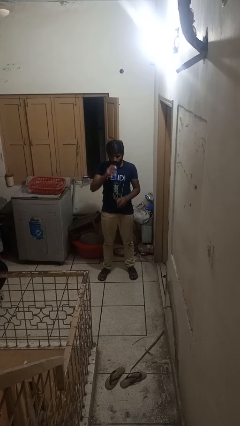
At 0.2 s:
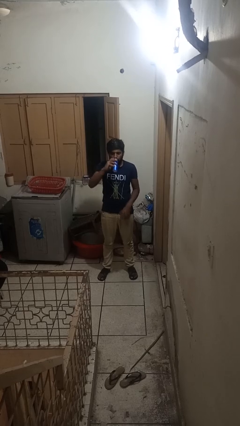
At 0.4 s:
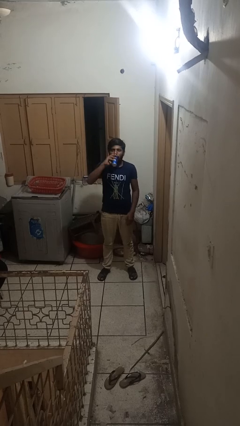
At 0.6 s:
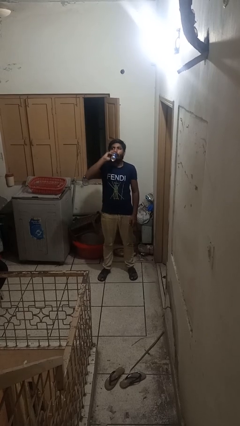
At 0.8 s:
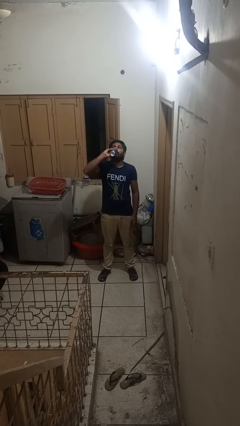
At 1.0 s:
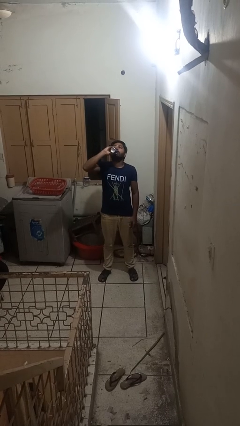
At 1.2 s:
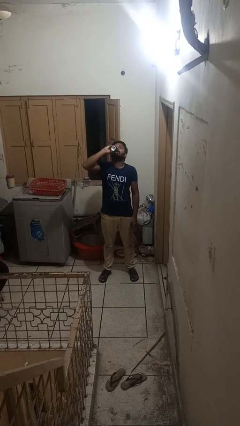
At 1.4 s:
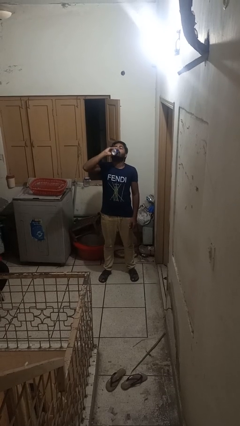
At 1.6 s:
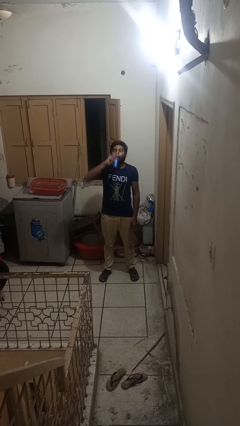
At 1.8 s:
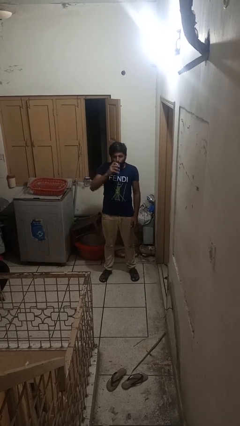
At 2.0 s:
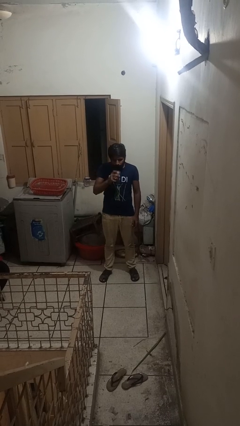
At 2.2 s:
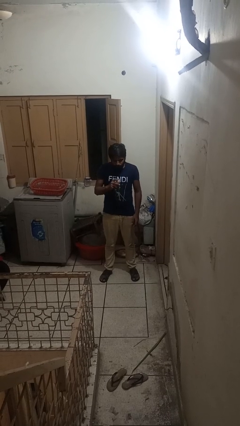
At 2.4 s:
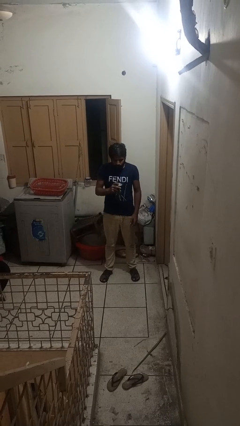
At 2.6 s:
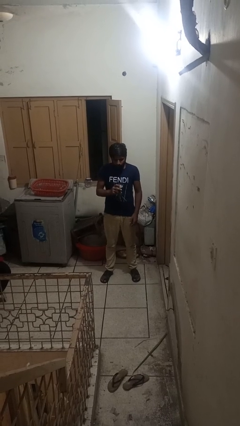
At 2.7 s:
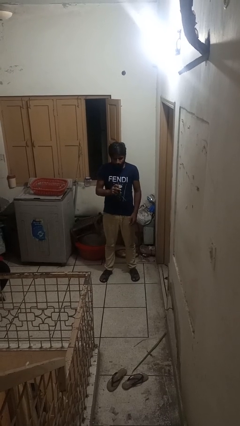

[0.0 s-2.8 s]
person drinks from beverage can

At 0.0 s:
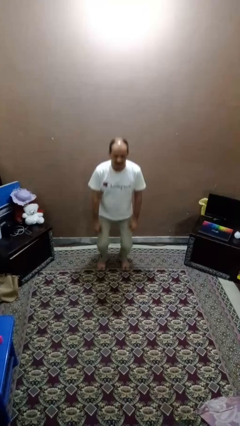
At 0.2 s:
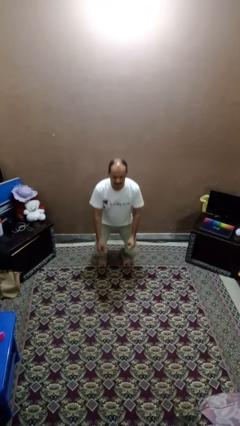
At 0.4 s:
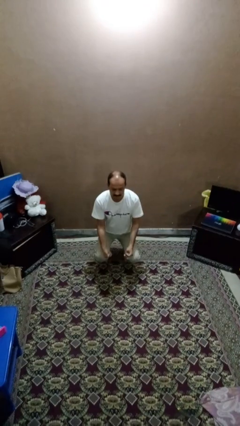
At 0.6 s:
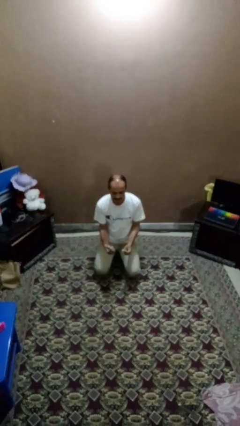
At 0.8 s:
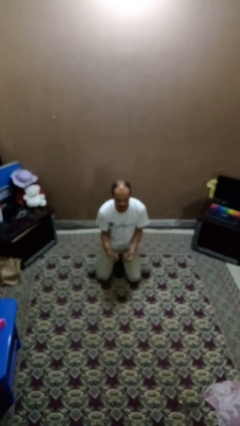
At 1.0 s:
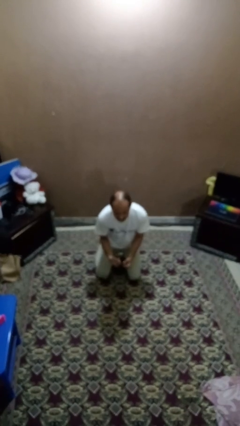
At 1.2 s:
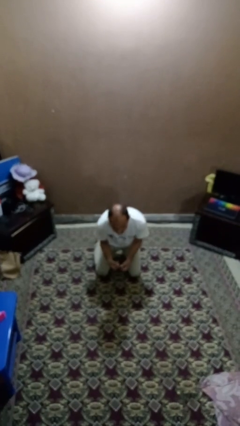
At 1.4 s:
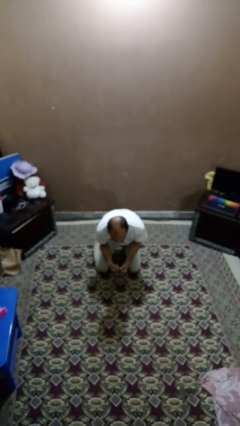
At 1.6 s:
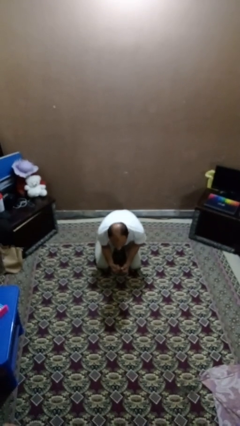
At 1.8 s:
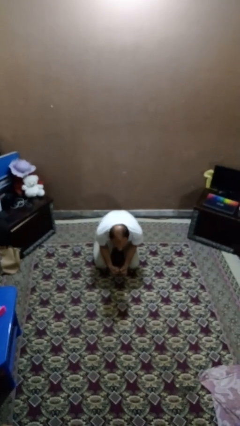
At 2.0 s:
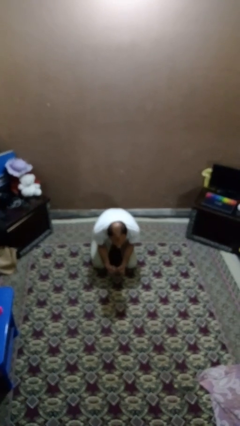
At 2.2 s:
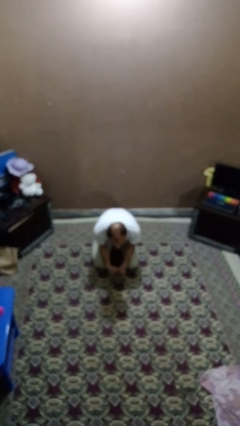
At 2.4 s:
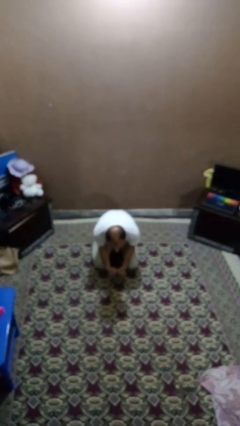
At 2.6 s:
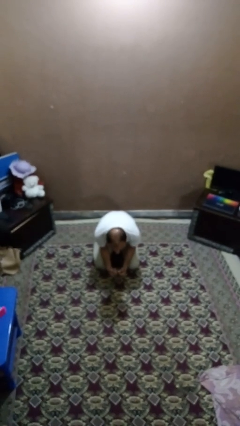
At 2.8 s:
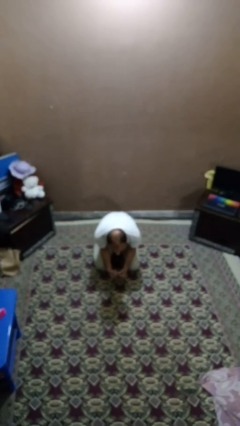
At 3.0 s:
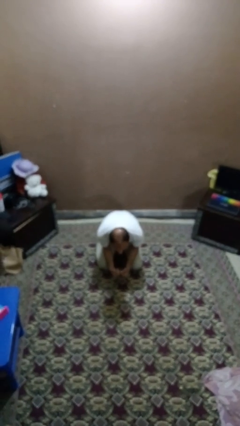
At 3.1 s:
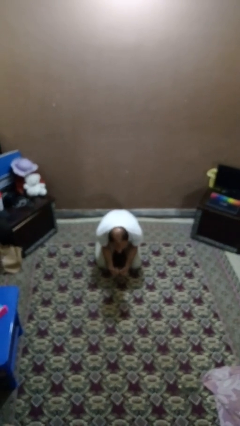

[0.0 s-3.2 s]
person kneels

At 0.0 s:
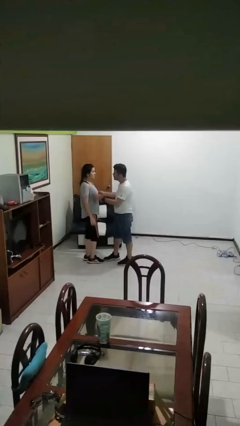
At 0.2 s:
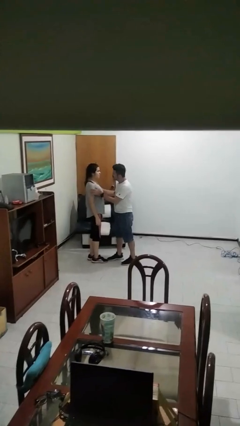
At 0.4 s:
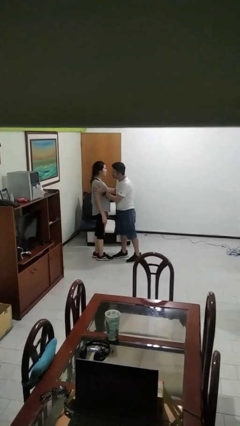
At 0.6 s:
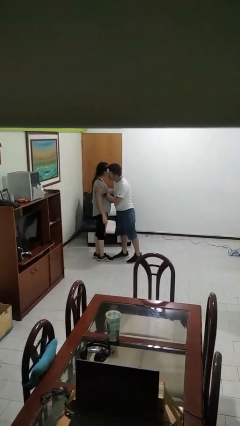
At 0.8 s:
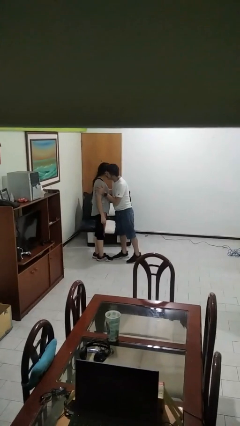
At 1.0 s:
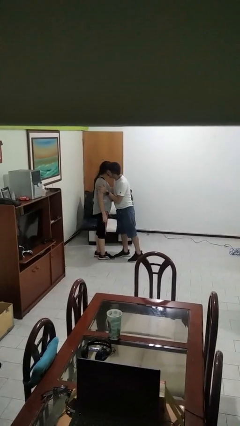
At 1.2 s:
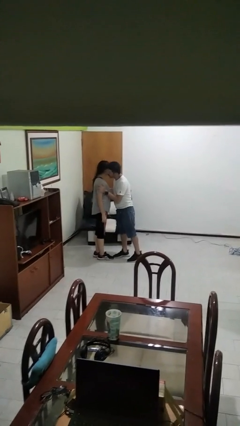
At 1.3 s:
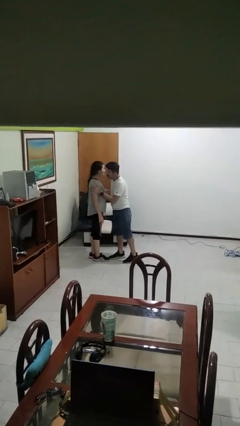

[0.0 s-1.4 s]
person kisses cheek of person

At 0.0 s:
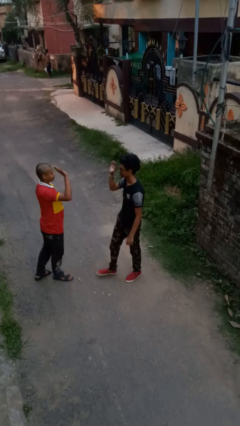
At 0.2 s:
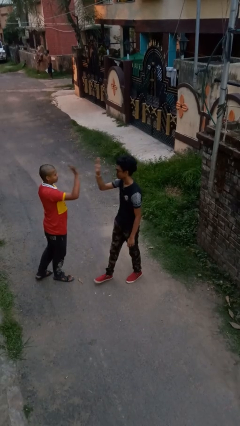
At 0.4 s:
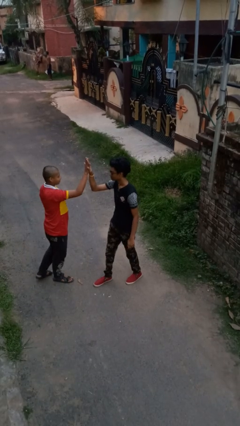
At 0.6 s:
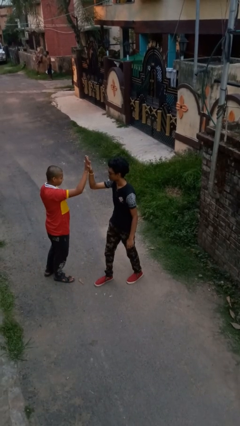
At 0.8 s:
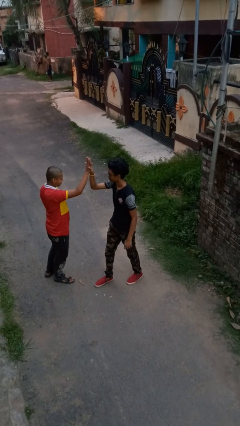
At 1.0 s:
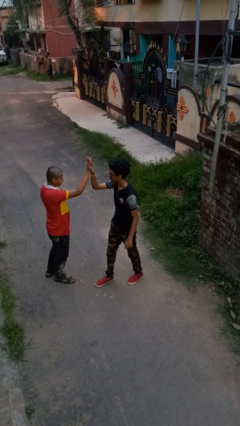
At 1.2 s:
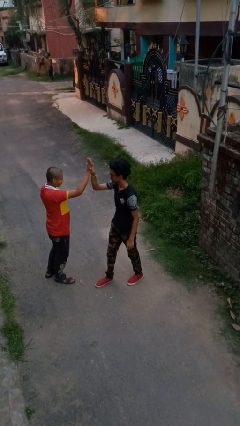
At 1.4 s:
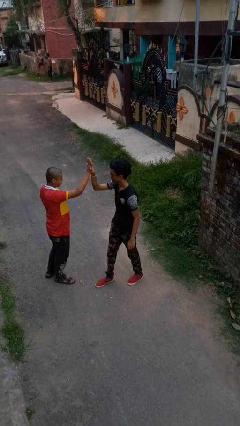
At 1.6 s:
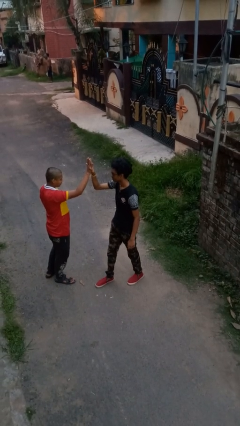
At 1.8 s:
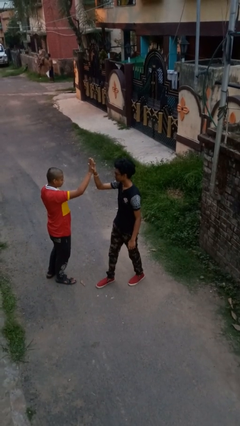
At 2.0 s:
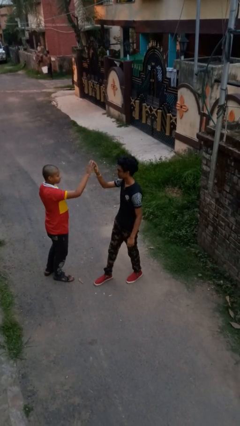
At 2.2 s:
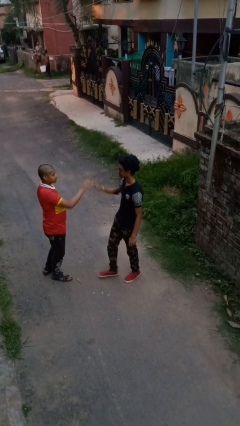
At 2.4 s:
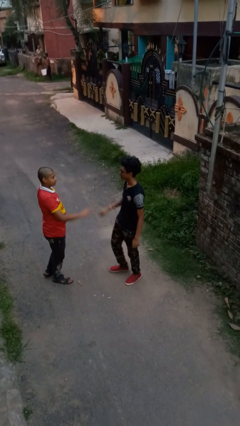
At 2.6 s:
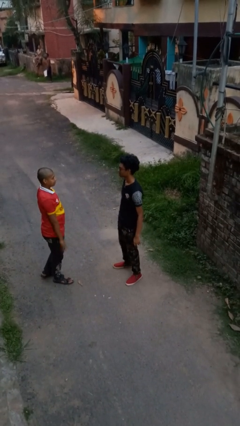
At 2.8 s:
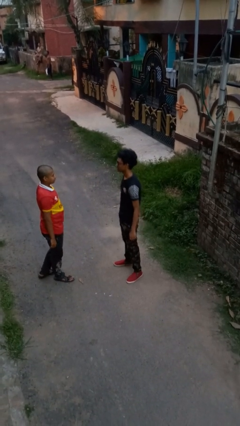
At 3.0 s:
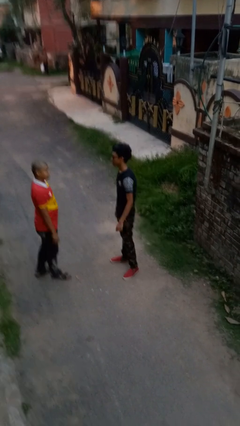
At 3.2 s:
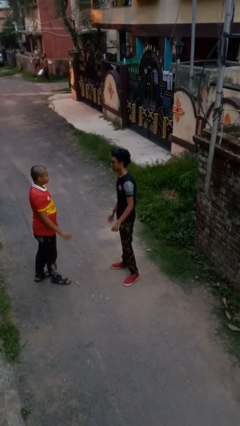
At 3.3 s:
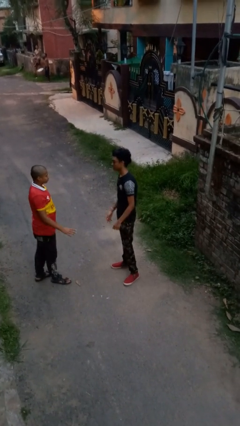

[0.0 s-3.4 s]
person highfives hand

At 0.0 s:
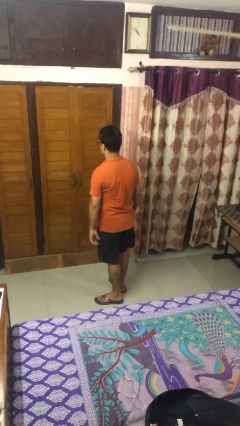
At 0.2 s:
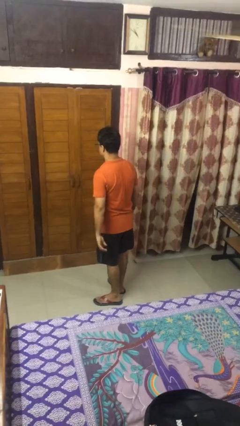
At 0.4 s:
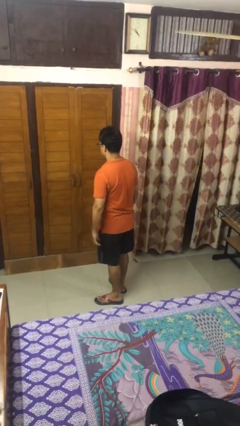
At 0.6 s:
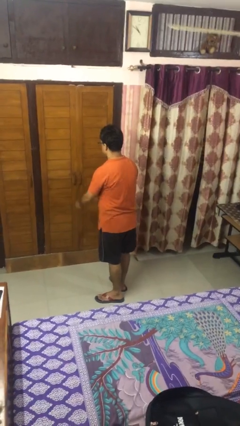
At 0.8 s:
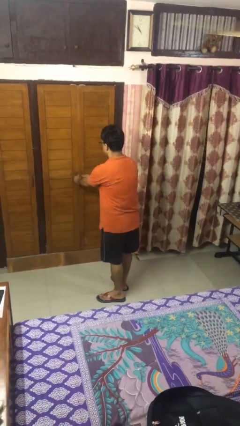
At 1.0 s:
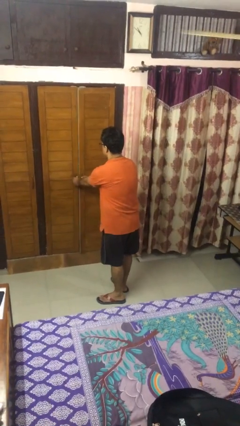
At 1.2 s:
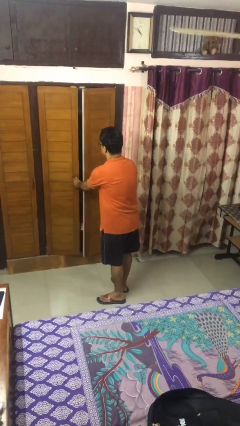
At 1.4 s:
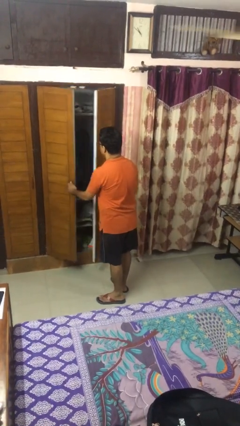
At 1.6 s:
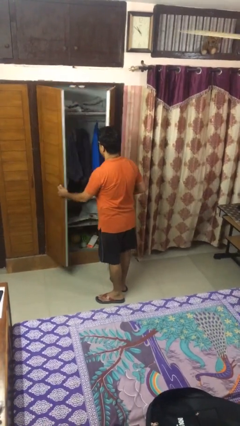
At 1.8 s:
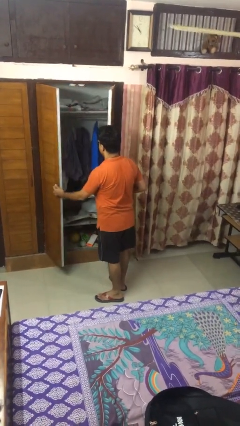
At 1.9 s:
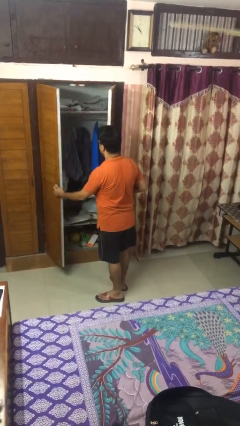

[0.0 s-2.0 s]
person opens closet door

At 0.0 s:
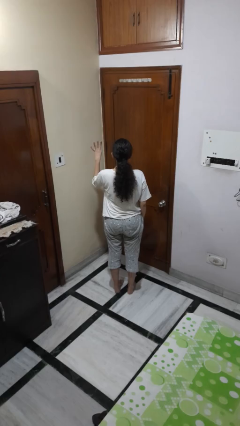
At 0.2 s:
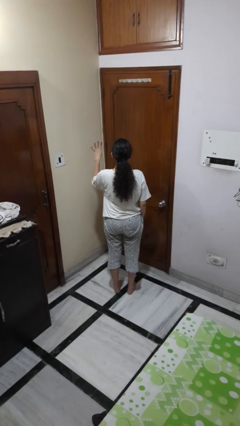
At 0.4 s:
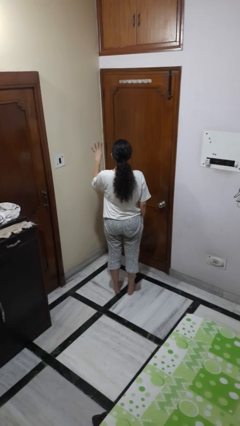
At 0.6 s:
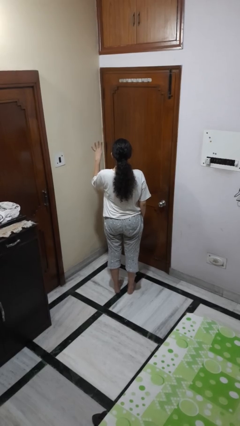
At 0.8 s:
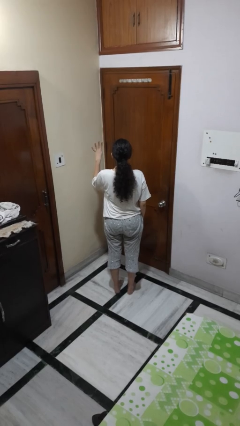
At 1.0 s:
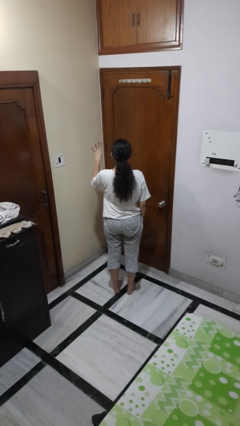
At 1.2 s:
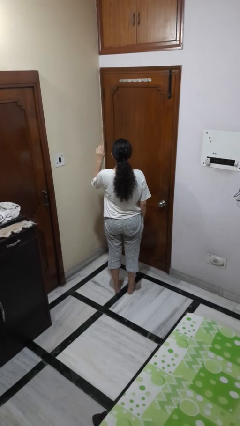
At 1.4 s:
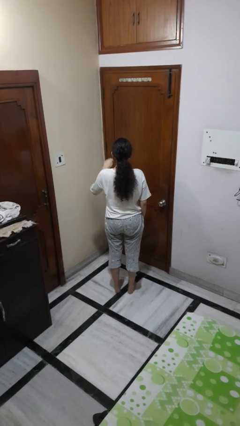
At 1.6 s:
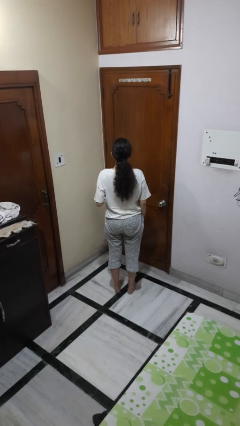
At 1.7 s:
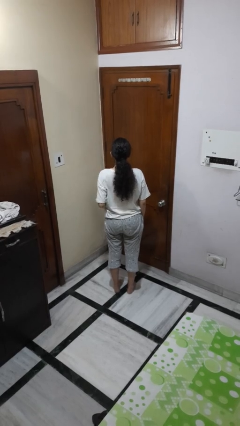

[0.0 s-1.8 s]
person gestures number four

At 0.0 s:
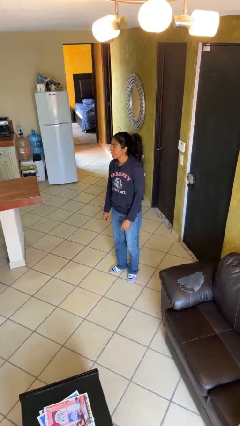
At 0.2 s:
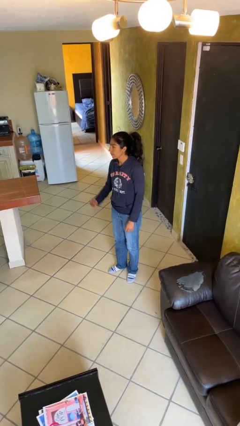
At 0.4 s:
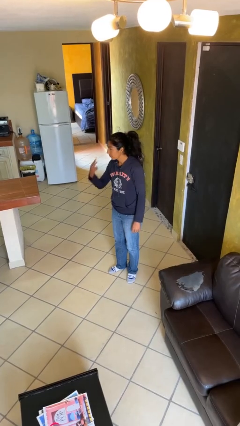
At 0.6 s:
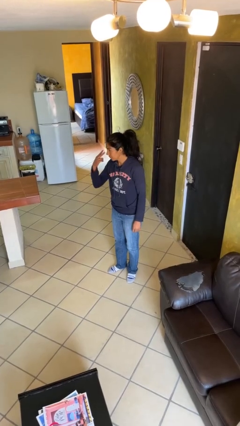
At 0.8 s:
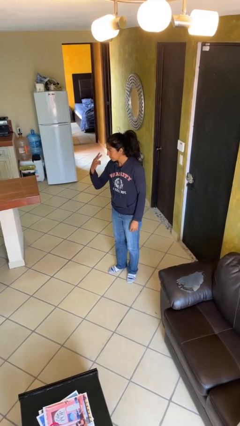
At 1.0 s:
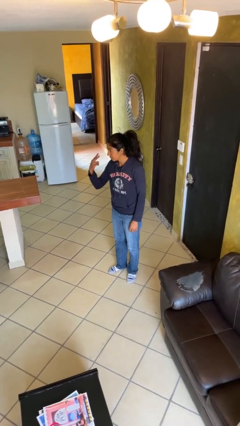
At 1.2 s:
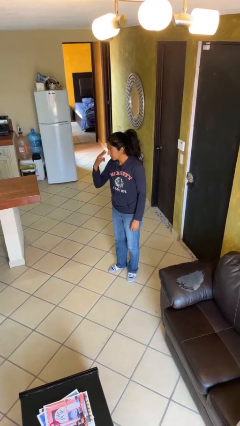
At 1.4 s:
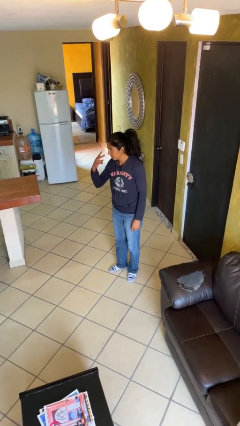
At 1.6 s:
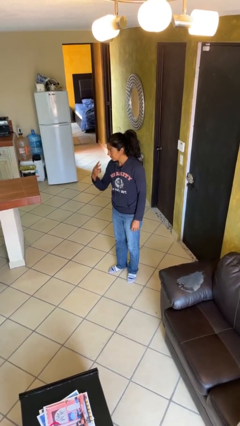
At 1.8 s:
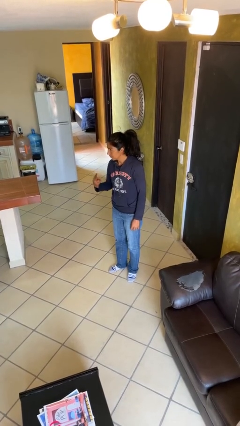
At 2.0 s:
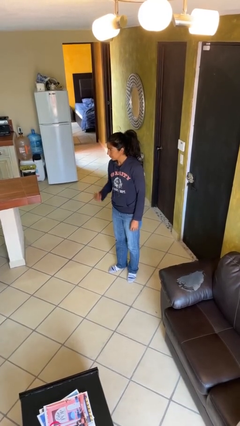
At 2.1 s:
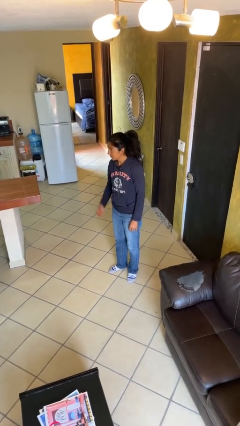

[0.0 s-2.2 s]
person gestures watch closely

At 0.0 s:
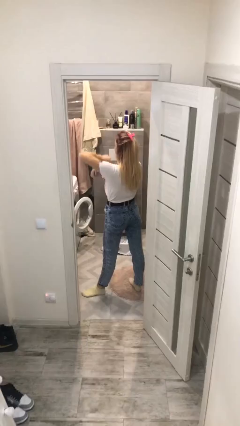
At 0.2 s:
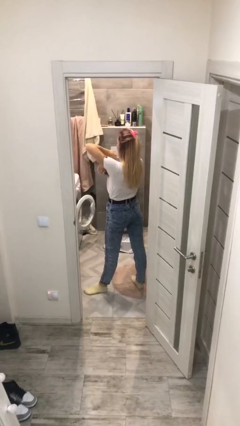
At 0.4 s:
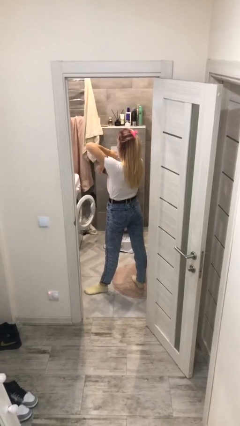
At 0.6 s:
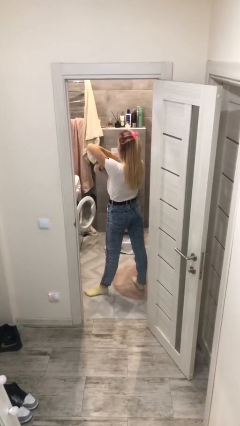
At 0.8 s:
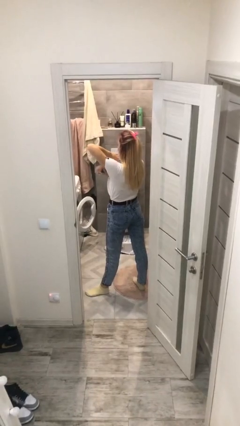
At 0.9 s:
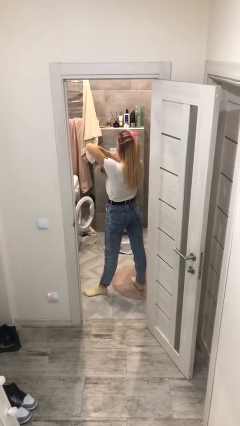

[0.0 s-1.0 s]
person applies deodorant
